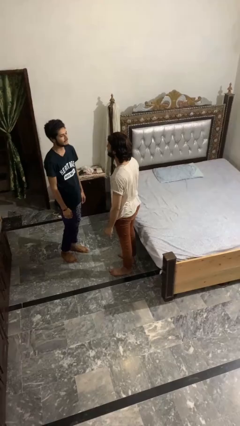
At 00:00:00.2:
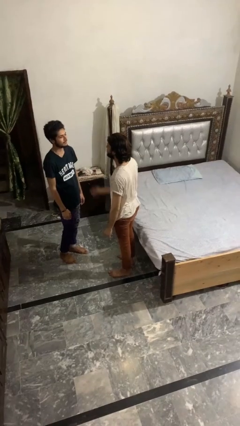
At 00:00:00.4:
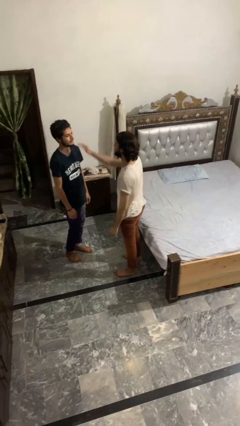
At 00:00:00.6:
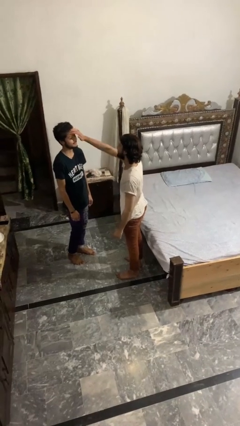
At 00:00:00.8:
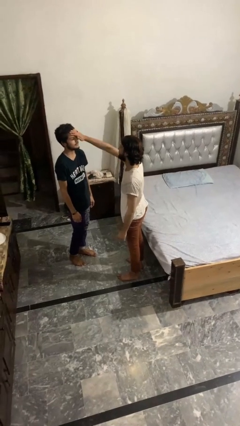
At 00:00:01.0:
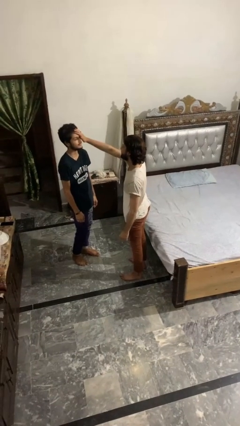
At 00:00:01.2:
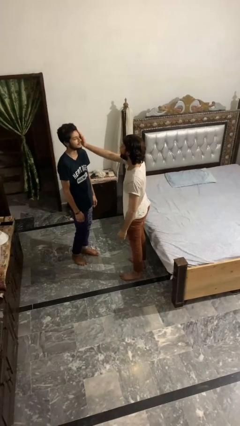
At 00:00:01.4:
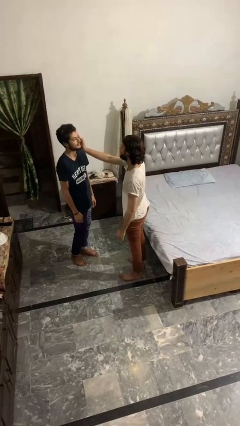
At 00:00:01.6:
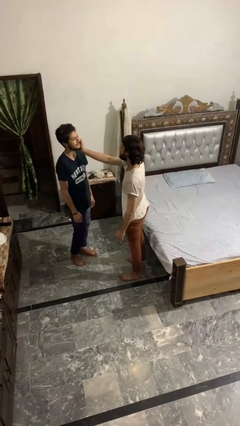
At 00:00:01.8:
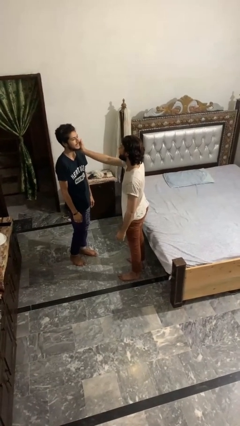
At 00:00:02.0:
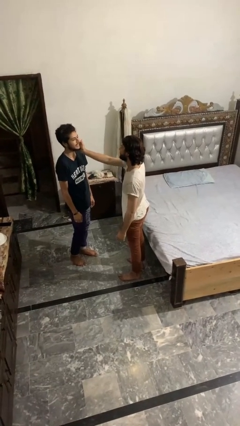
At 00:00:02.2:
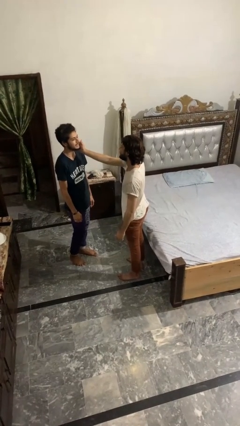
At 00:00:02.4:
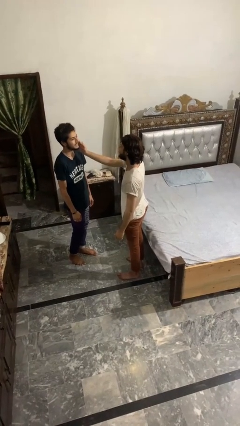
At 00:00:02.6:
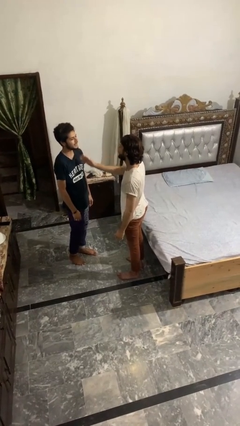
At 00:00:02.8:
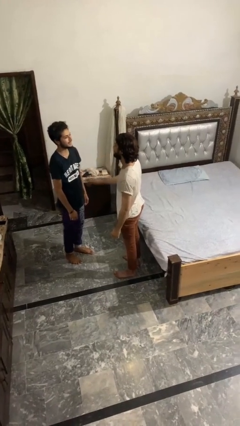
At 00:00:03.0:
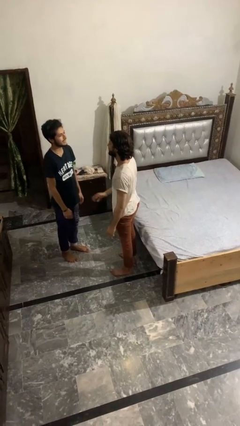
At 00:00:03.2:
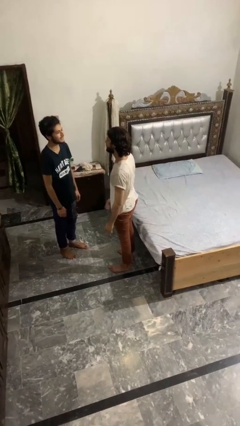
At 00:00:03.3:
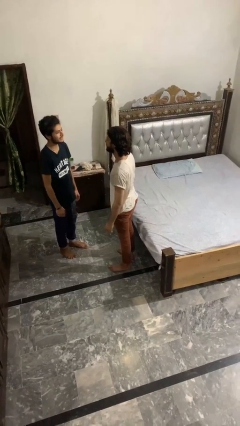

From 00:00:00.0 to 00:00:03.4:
person touches face of person
